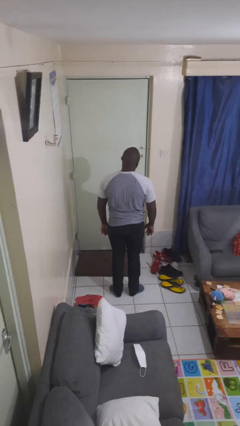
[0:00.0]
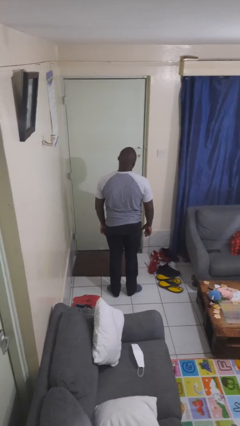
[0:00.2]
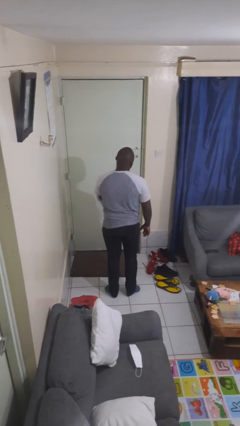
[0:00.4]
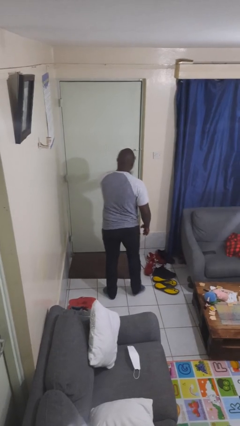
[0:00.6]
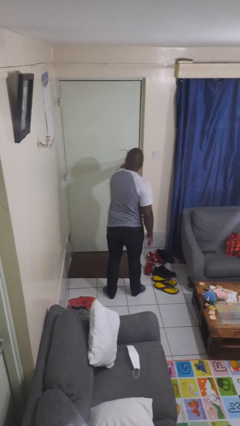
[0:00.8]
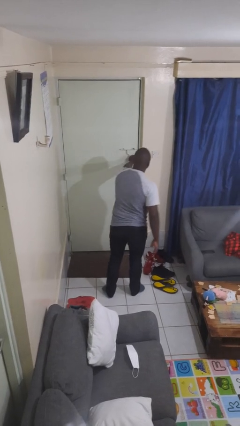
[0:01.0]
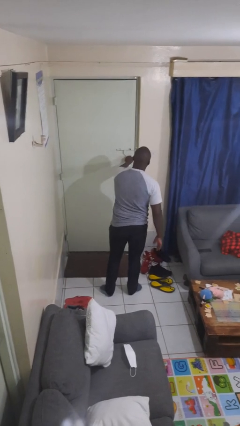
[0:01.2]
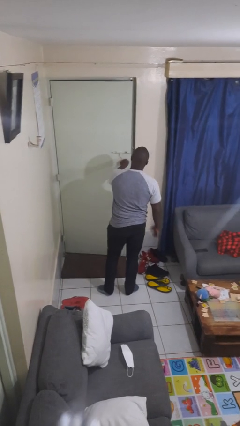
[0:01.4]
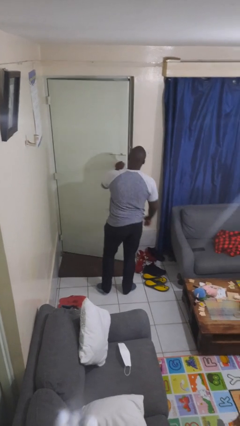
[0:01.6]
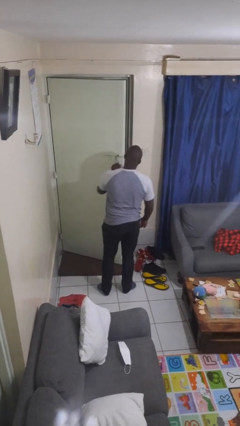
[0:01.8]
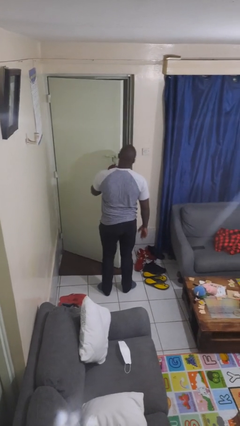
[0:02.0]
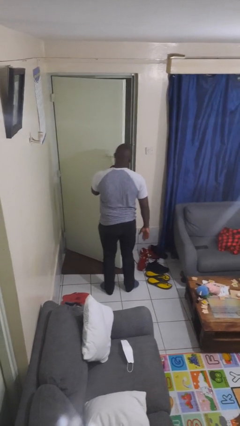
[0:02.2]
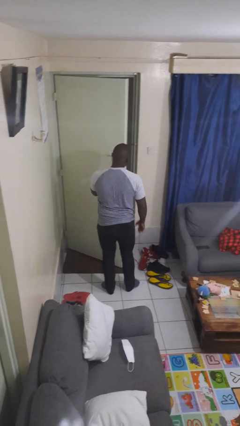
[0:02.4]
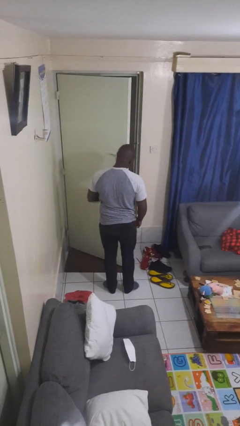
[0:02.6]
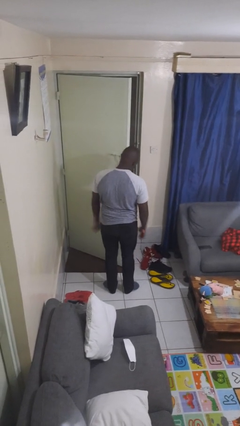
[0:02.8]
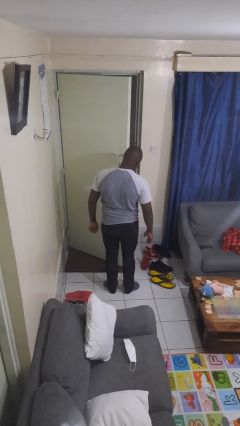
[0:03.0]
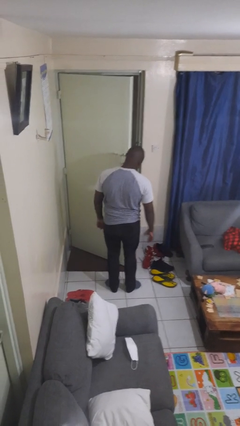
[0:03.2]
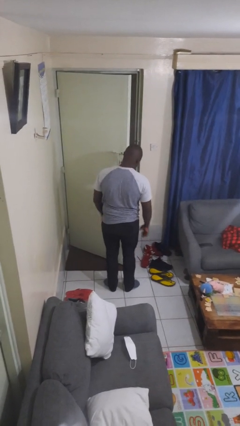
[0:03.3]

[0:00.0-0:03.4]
person opens facility door

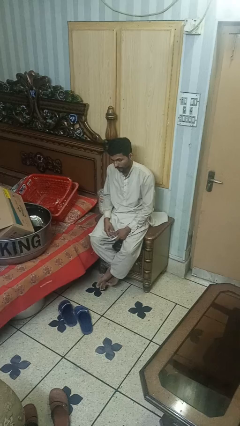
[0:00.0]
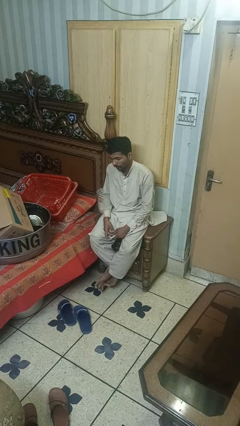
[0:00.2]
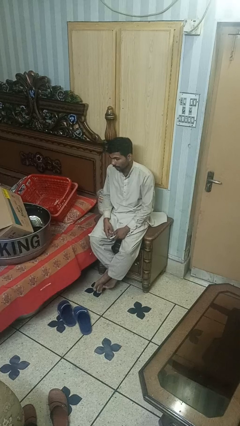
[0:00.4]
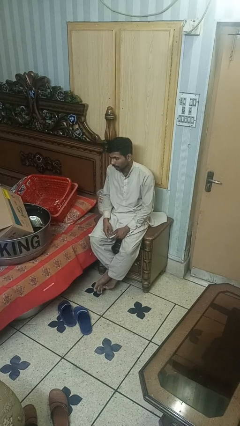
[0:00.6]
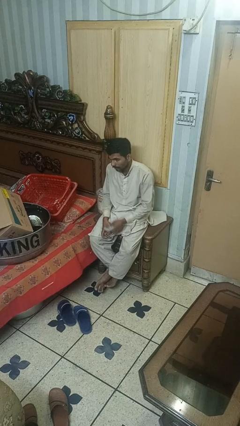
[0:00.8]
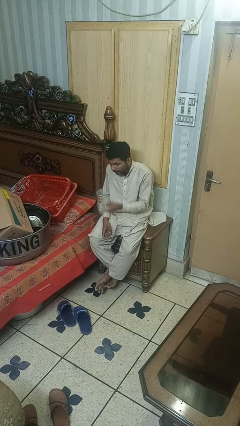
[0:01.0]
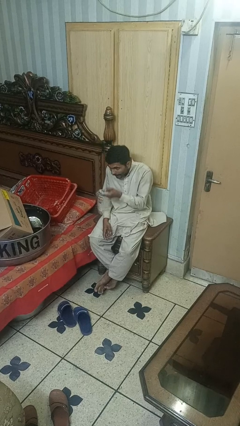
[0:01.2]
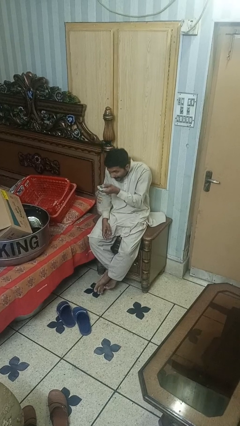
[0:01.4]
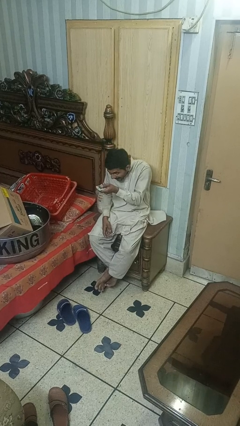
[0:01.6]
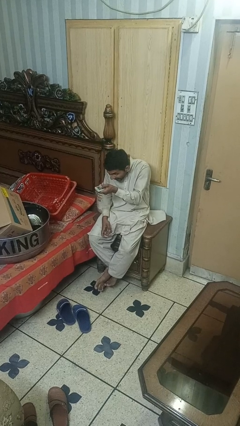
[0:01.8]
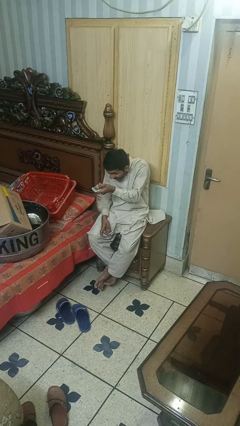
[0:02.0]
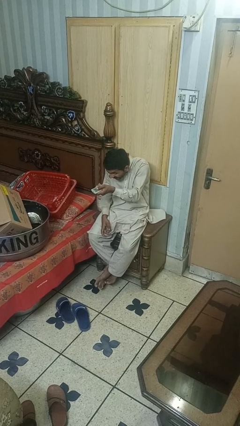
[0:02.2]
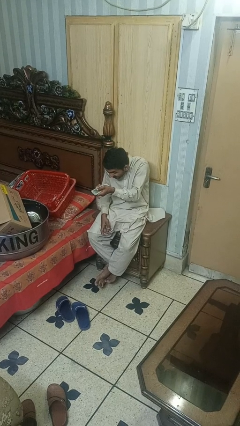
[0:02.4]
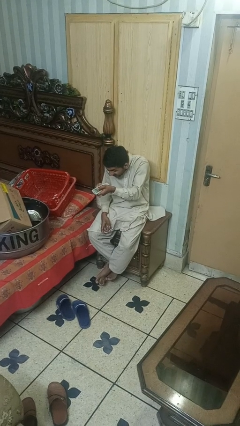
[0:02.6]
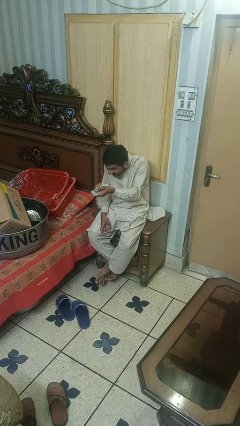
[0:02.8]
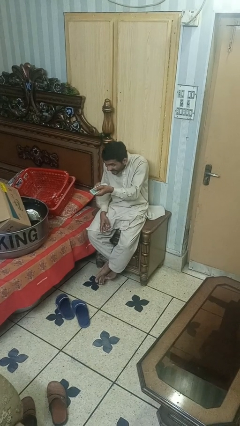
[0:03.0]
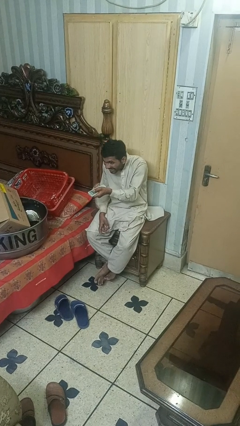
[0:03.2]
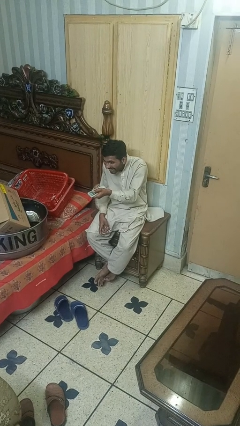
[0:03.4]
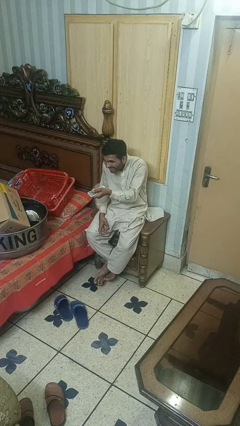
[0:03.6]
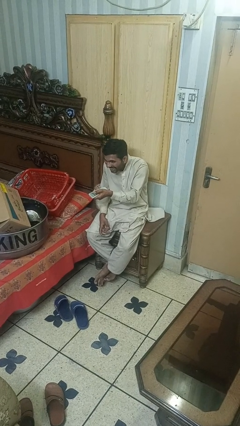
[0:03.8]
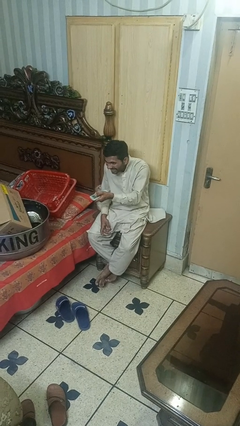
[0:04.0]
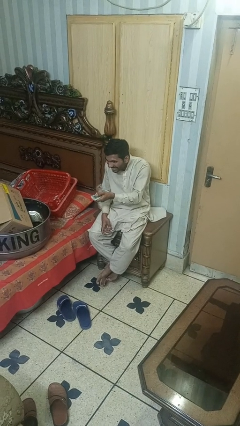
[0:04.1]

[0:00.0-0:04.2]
person uses television remote

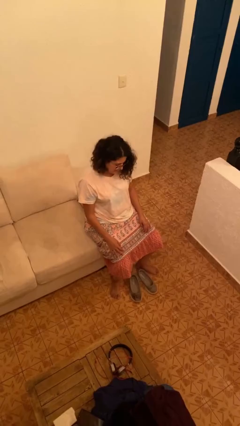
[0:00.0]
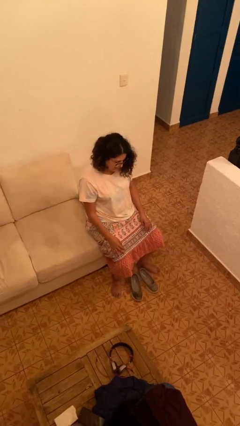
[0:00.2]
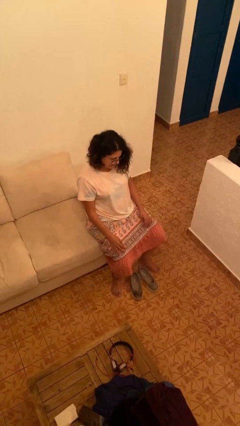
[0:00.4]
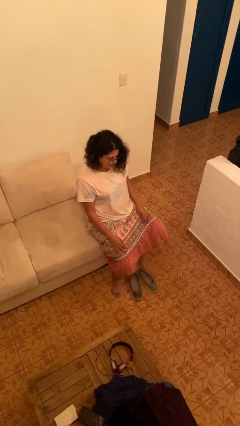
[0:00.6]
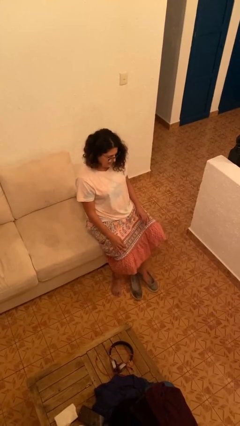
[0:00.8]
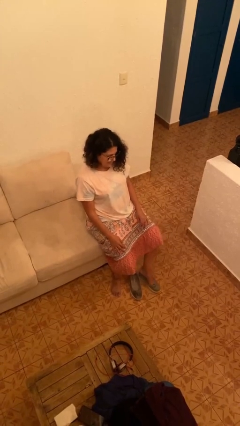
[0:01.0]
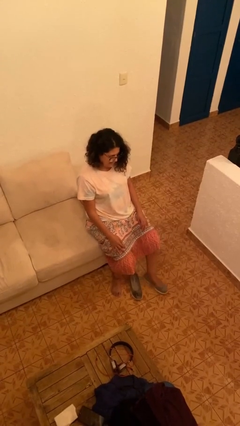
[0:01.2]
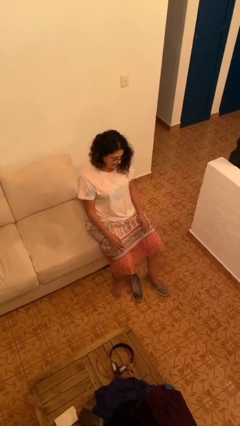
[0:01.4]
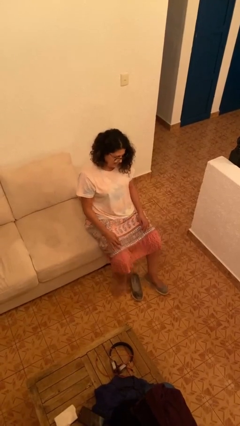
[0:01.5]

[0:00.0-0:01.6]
person puts on shoes

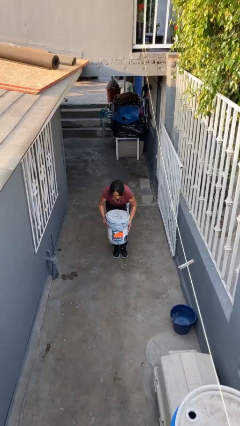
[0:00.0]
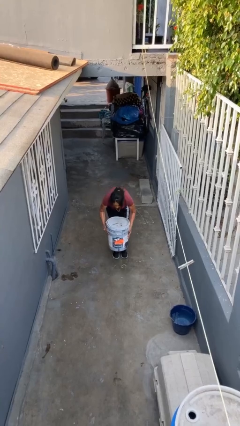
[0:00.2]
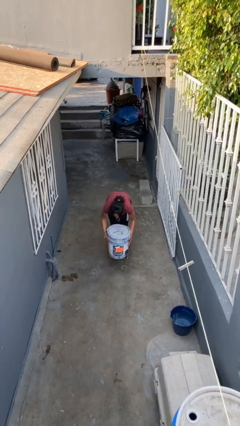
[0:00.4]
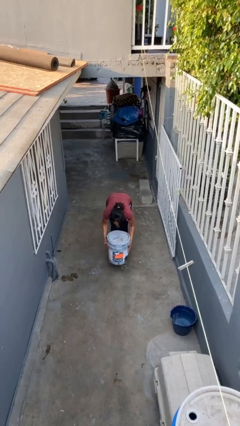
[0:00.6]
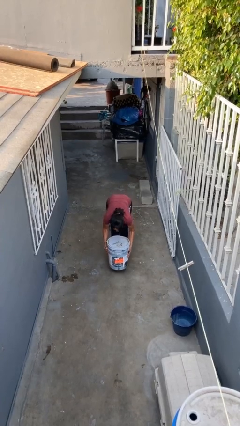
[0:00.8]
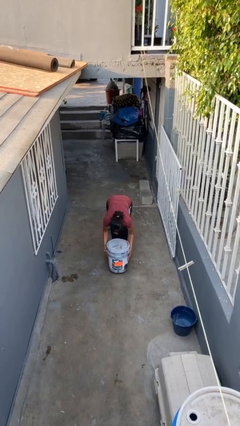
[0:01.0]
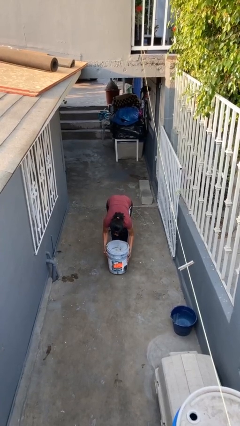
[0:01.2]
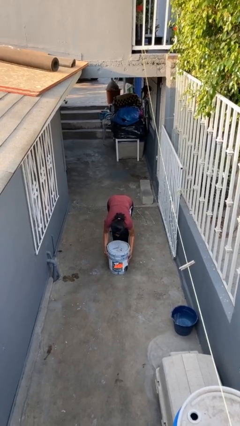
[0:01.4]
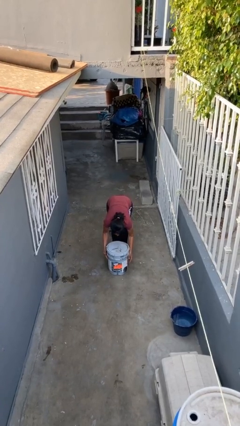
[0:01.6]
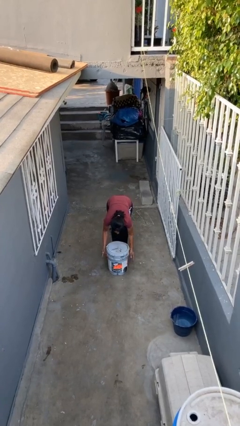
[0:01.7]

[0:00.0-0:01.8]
person puts down object on floor

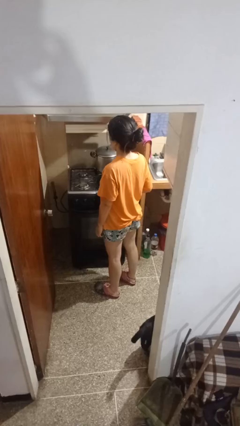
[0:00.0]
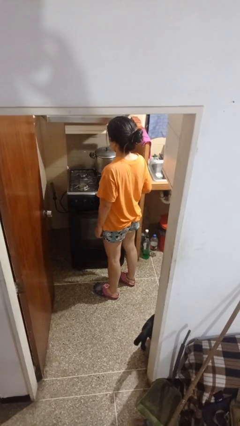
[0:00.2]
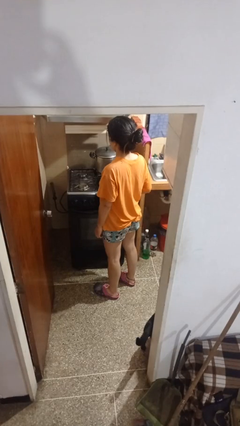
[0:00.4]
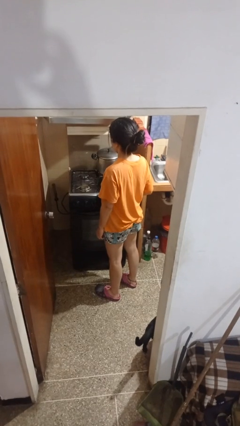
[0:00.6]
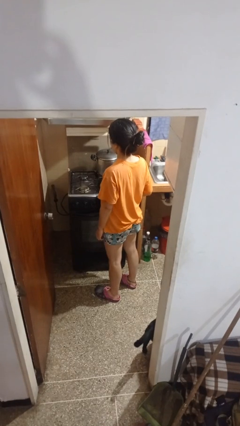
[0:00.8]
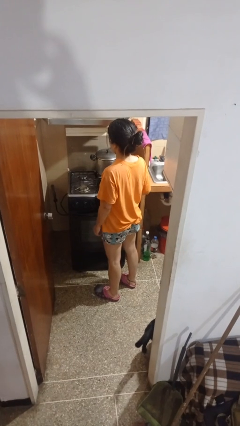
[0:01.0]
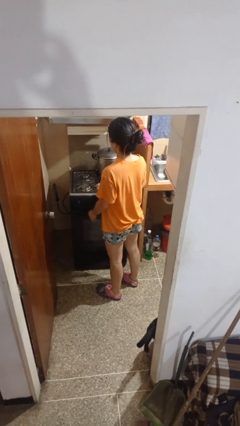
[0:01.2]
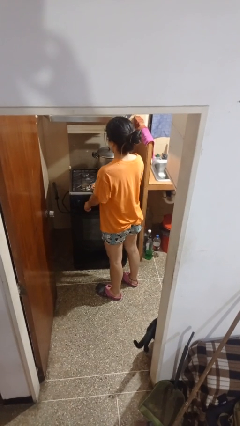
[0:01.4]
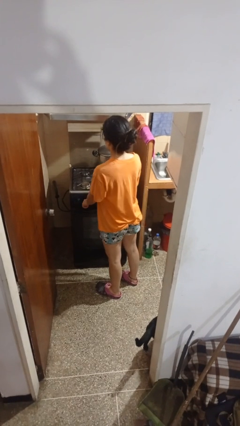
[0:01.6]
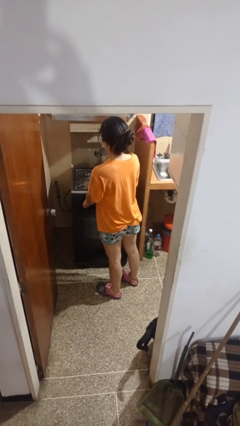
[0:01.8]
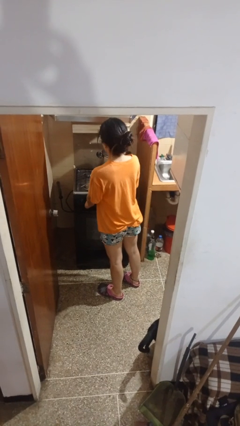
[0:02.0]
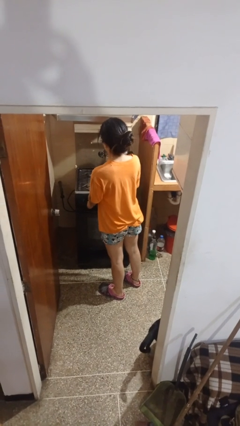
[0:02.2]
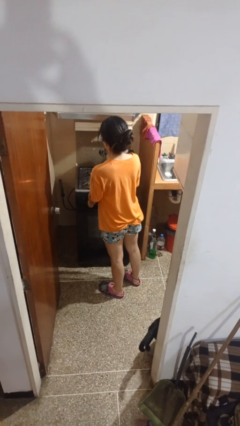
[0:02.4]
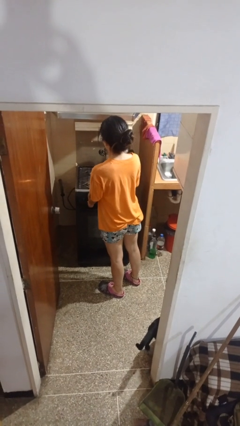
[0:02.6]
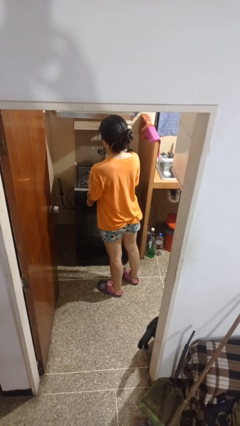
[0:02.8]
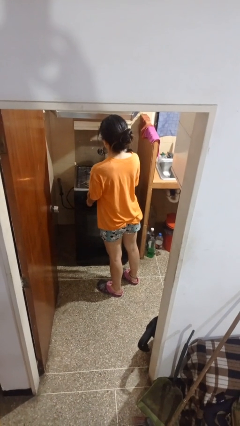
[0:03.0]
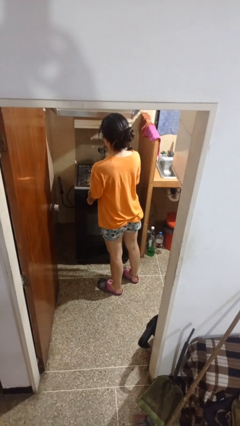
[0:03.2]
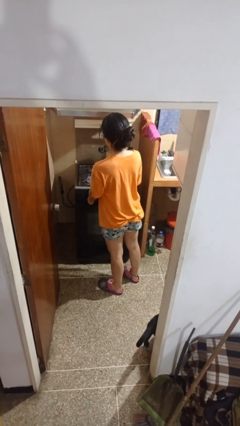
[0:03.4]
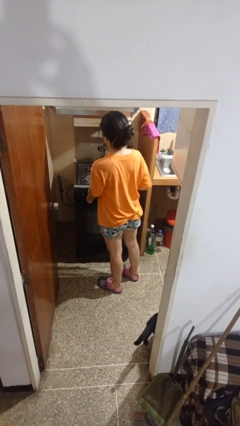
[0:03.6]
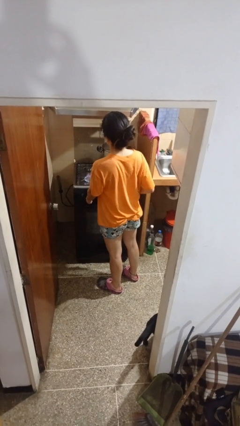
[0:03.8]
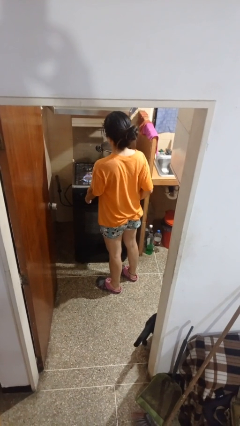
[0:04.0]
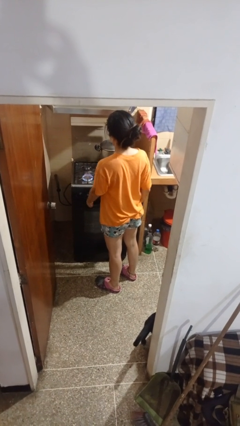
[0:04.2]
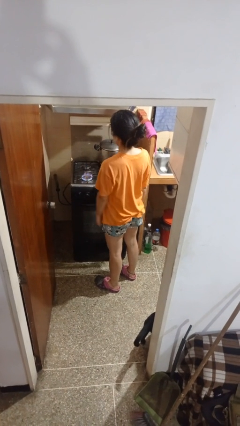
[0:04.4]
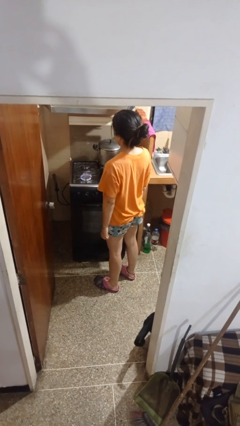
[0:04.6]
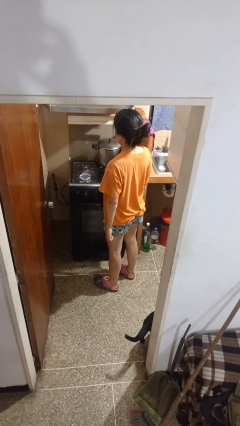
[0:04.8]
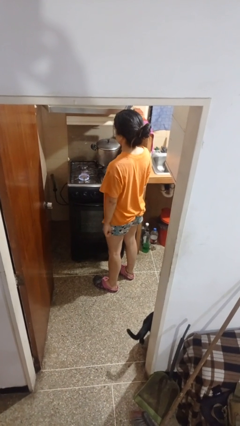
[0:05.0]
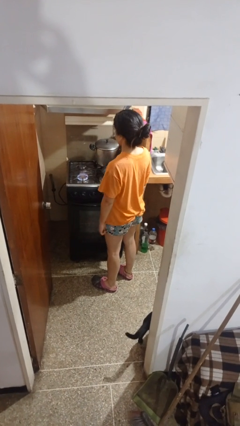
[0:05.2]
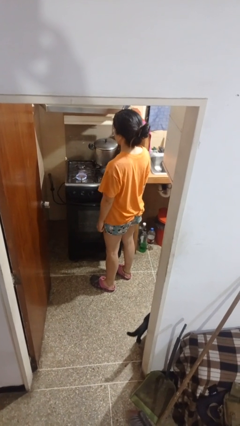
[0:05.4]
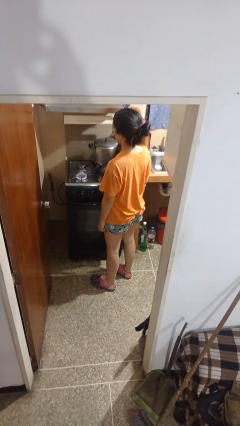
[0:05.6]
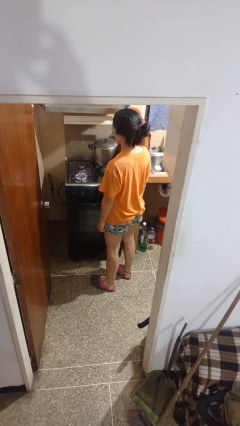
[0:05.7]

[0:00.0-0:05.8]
person turns on stovetop

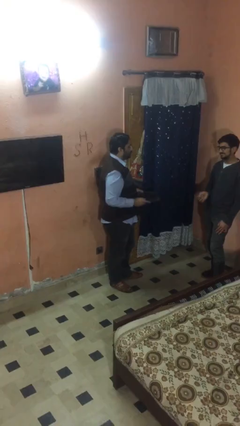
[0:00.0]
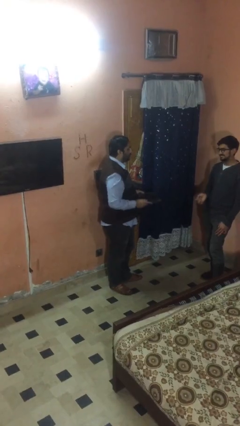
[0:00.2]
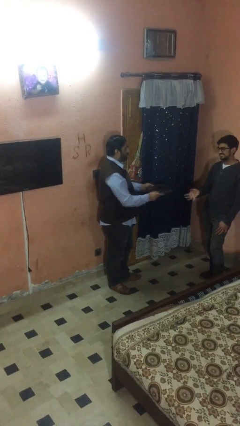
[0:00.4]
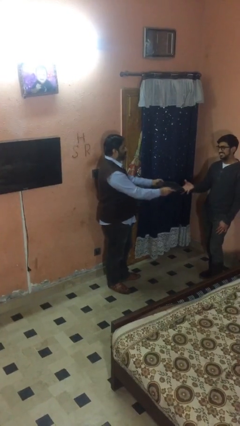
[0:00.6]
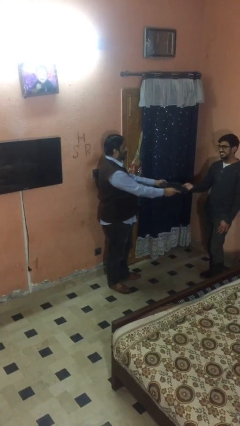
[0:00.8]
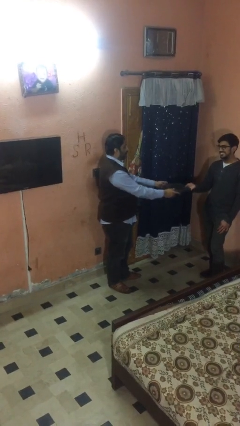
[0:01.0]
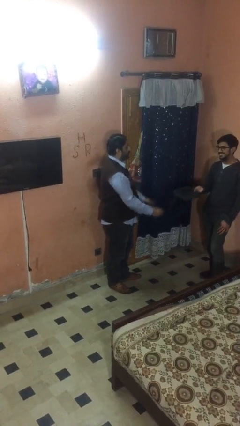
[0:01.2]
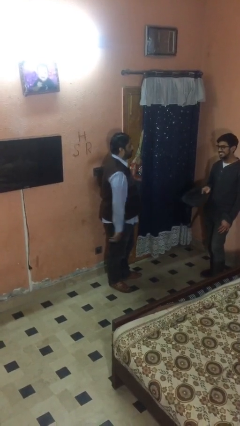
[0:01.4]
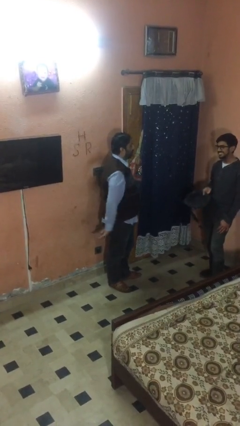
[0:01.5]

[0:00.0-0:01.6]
person transfers object to person
